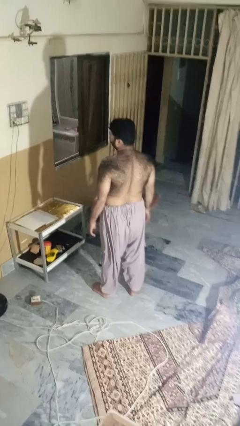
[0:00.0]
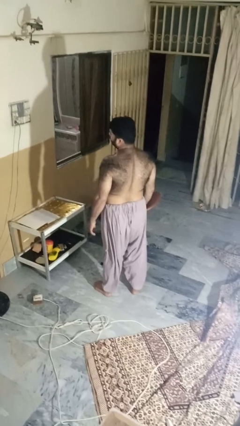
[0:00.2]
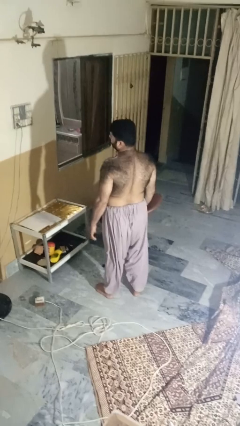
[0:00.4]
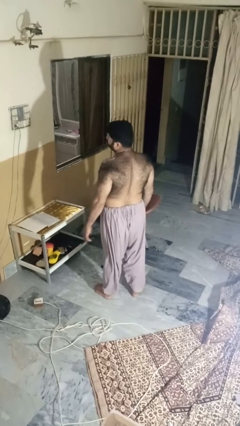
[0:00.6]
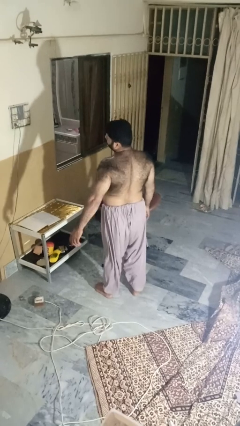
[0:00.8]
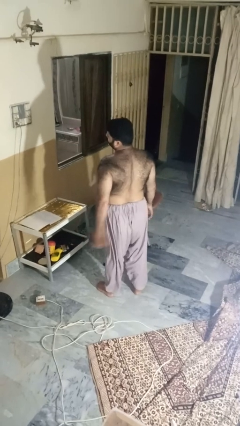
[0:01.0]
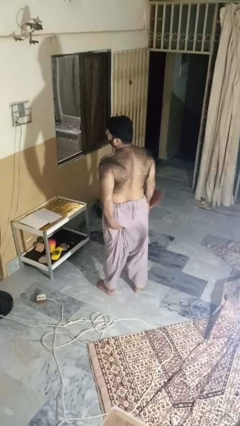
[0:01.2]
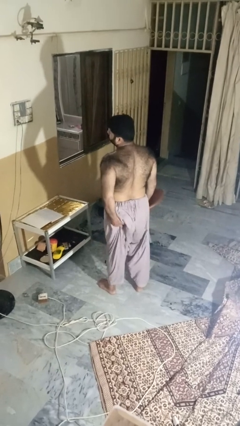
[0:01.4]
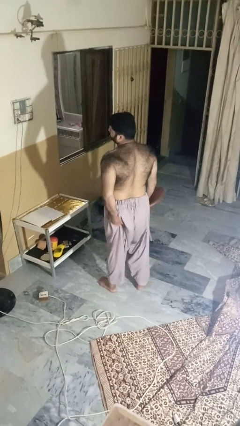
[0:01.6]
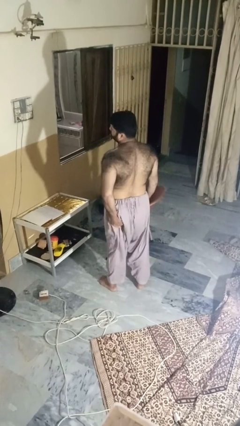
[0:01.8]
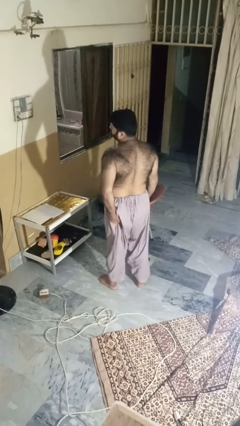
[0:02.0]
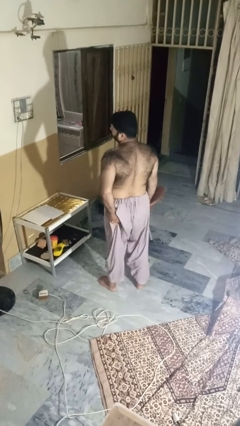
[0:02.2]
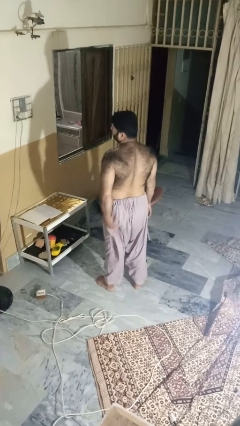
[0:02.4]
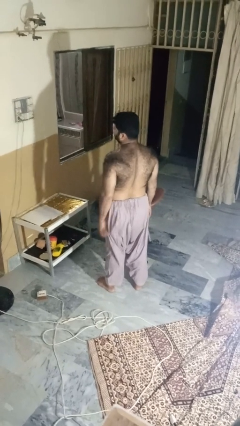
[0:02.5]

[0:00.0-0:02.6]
person wiggles hips

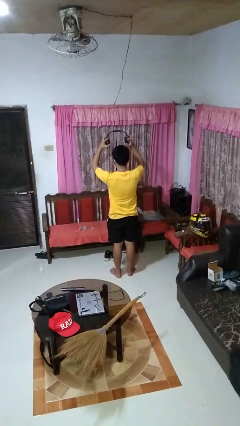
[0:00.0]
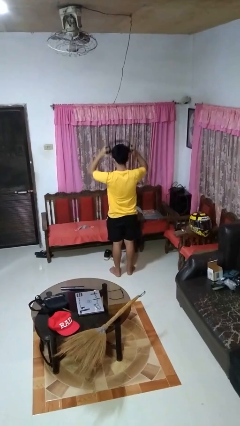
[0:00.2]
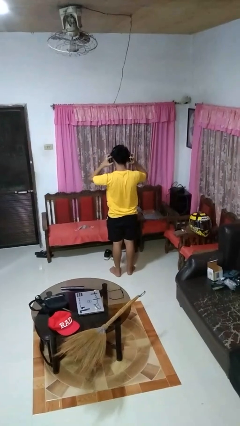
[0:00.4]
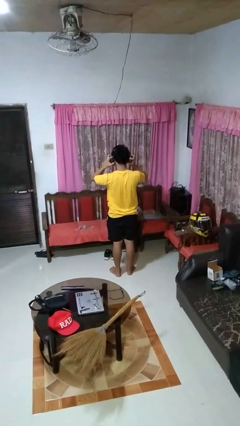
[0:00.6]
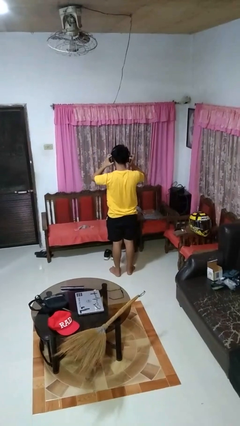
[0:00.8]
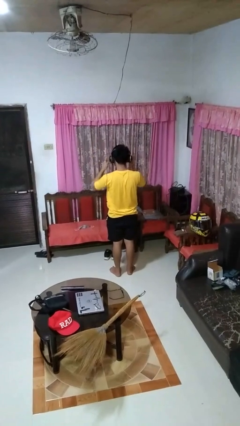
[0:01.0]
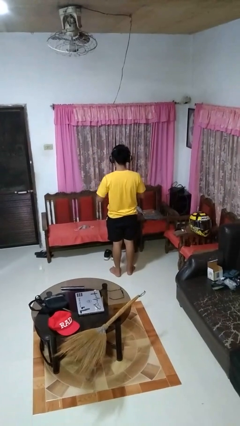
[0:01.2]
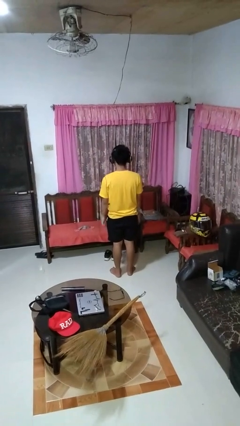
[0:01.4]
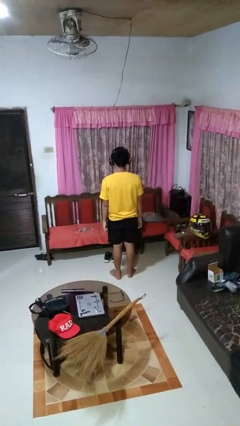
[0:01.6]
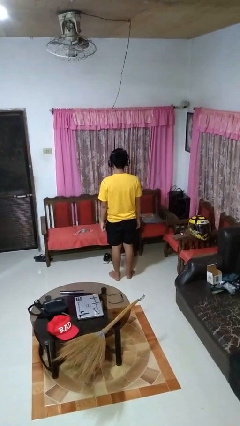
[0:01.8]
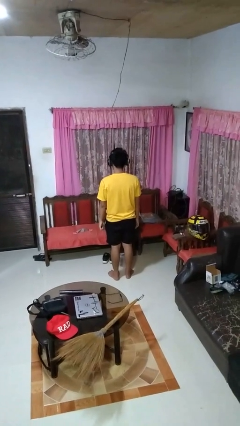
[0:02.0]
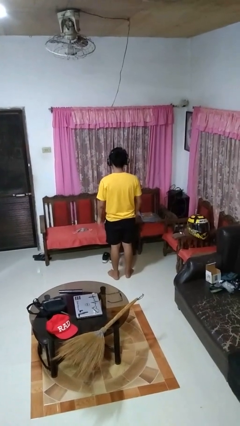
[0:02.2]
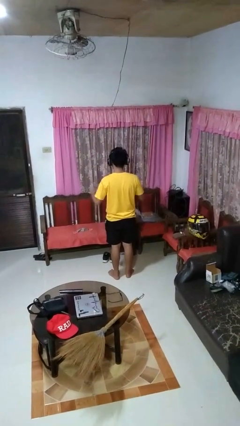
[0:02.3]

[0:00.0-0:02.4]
person puts on headphones

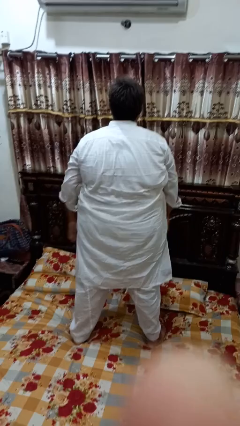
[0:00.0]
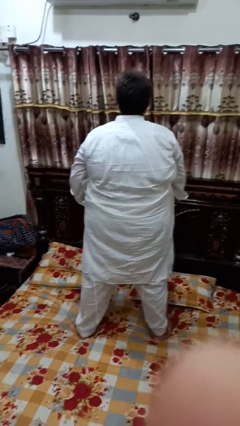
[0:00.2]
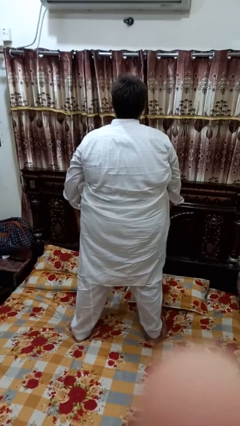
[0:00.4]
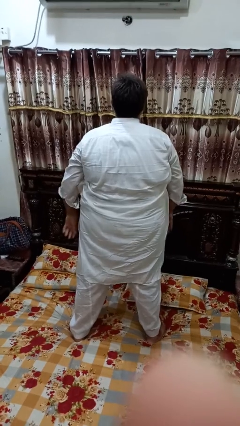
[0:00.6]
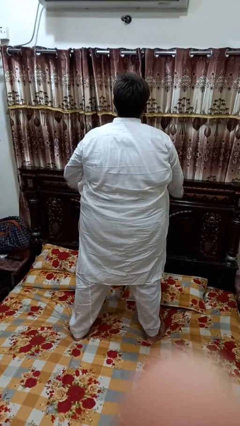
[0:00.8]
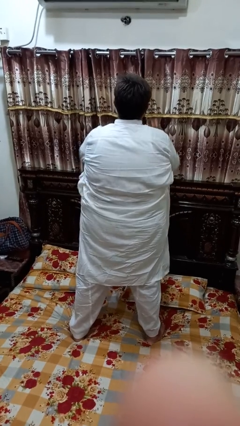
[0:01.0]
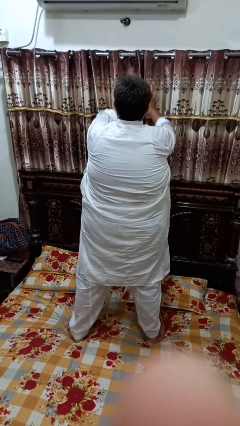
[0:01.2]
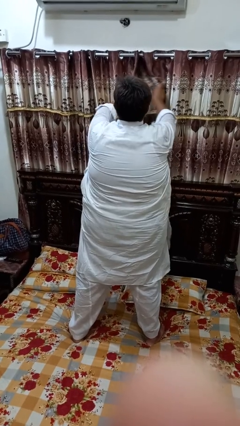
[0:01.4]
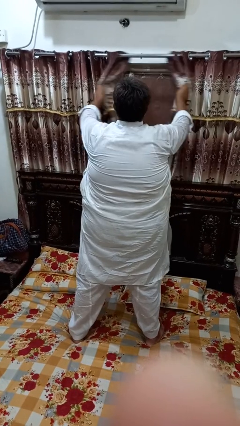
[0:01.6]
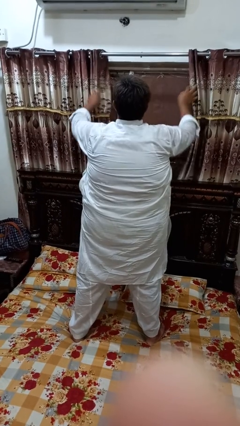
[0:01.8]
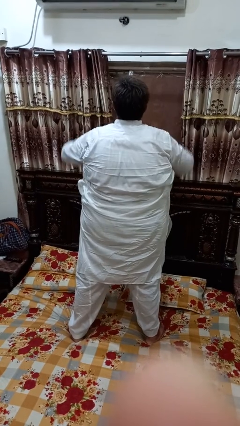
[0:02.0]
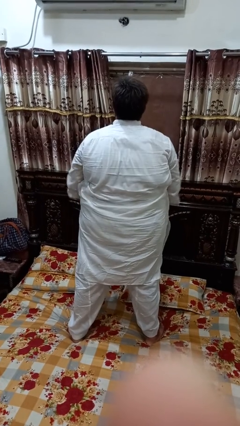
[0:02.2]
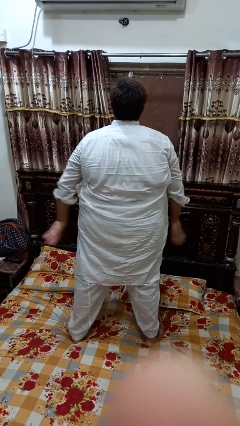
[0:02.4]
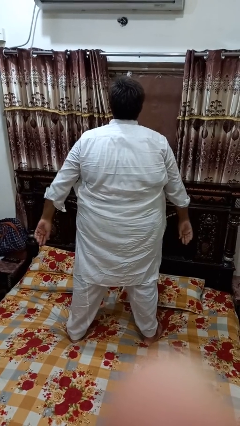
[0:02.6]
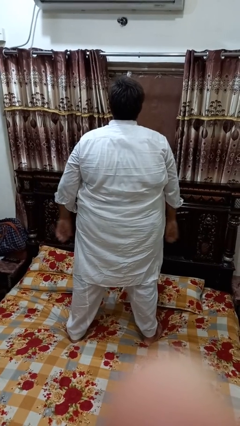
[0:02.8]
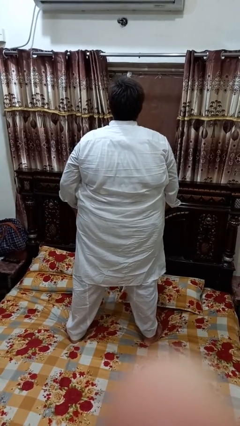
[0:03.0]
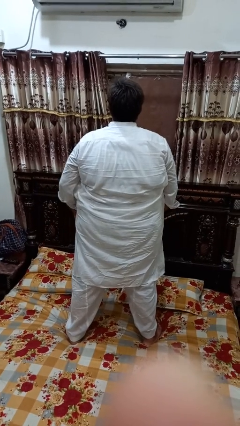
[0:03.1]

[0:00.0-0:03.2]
person opens curtains

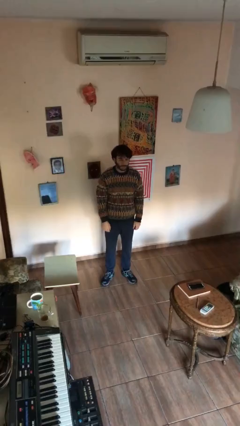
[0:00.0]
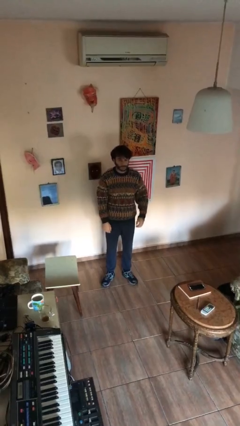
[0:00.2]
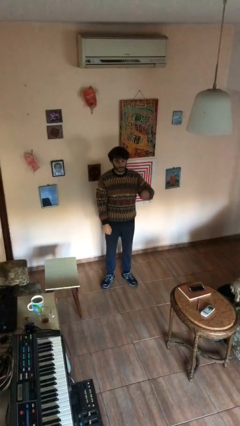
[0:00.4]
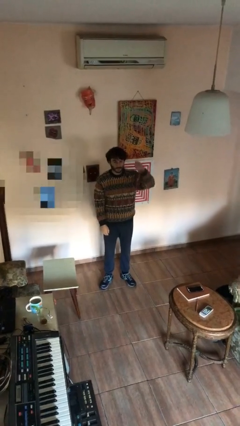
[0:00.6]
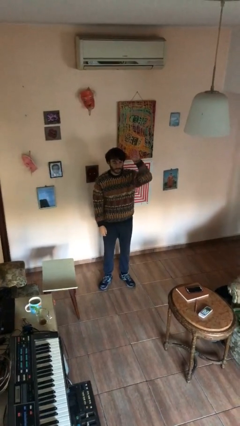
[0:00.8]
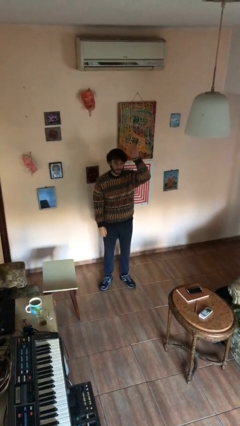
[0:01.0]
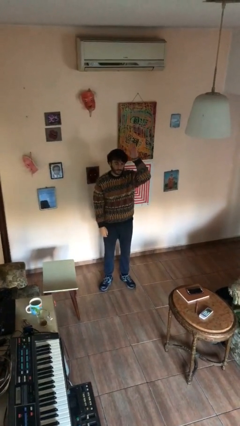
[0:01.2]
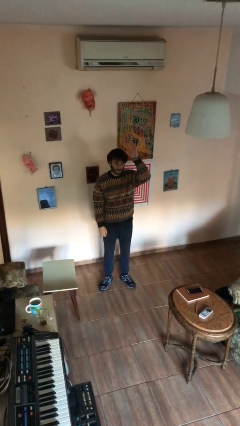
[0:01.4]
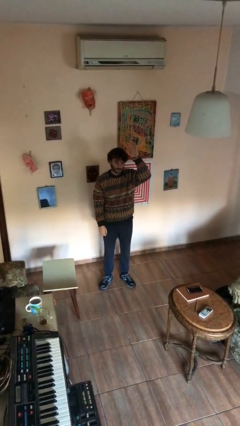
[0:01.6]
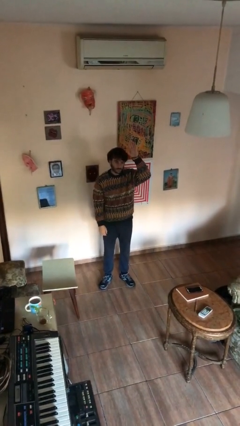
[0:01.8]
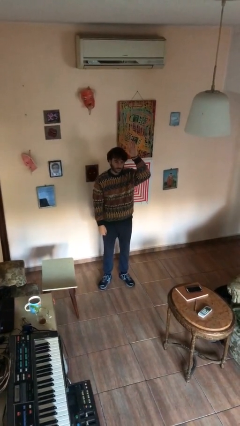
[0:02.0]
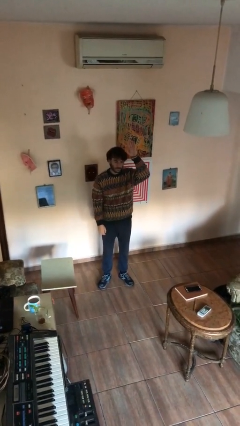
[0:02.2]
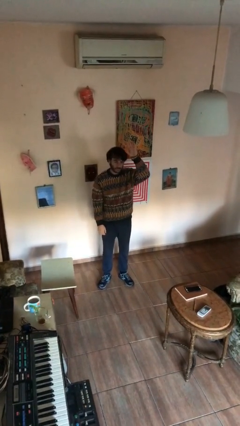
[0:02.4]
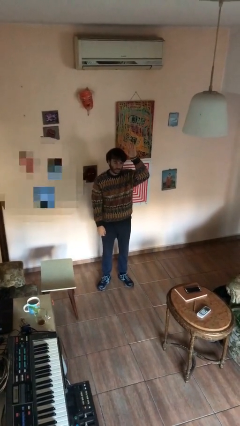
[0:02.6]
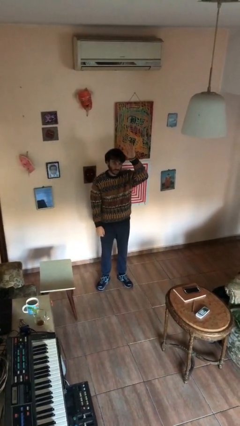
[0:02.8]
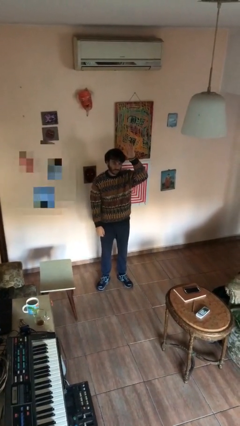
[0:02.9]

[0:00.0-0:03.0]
person gestures raise hand

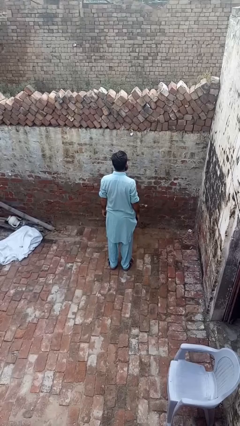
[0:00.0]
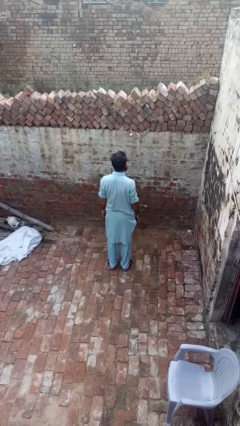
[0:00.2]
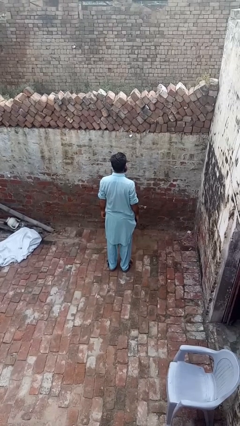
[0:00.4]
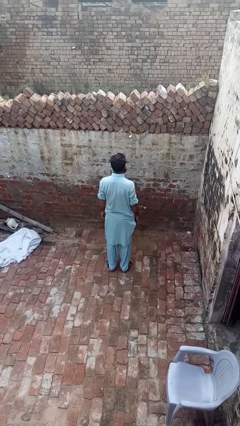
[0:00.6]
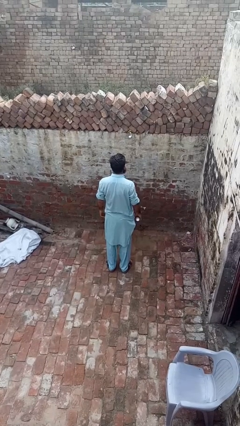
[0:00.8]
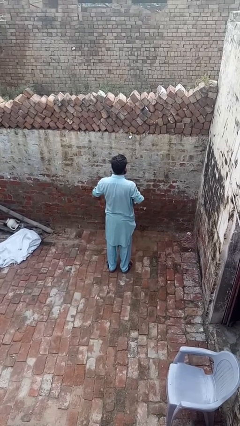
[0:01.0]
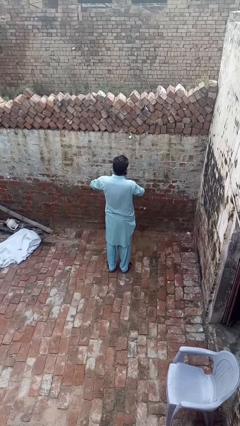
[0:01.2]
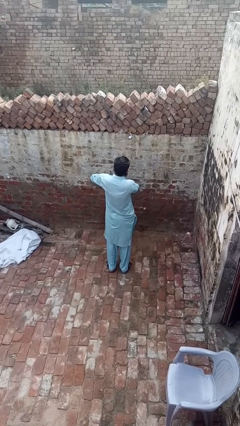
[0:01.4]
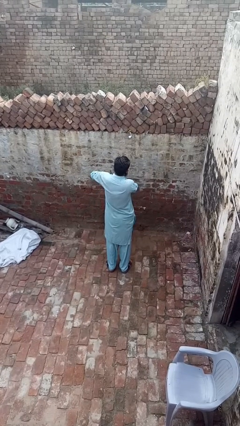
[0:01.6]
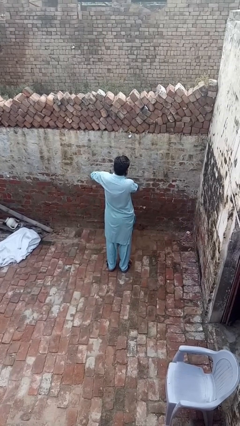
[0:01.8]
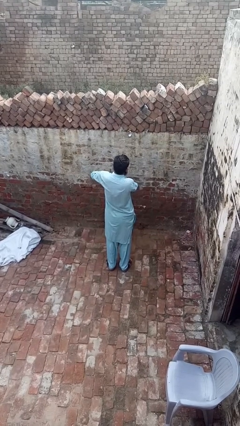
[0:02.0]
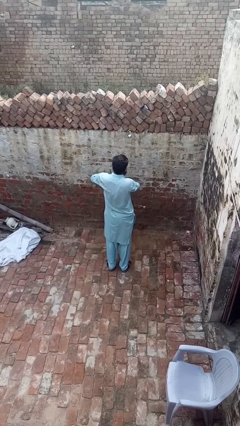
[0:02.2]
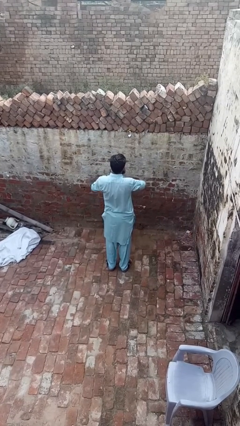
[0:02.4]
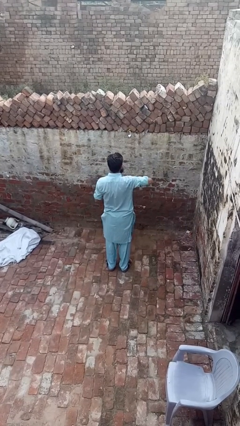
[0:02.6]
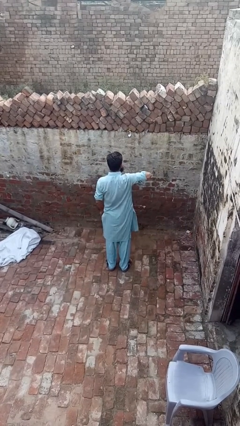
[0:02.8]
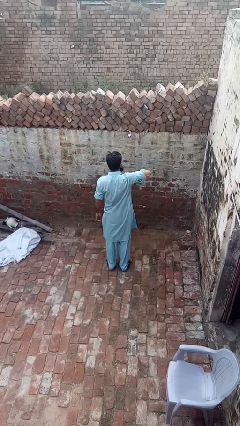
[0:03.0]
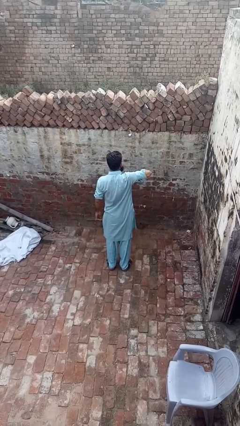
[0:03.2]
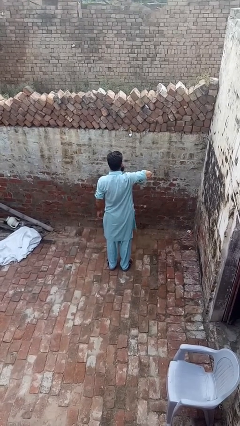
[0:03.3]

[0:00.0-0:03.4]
person applies deodorant

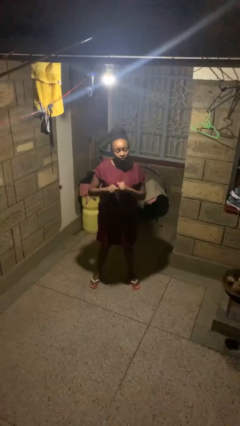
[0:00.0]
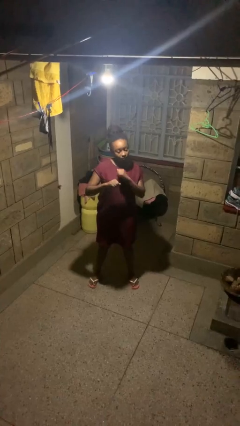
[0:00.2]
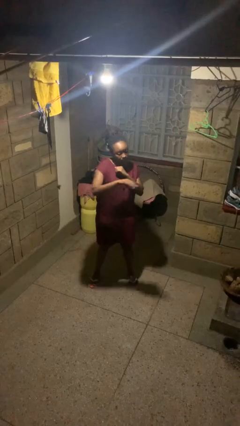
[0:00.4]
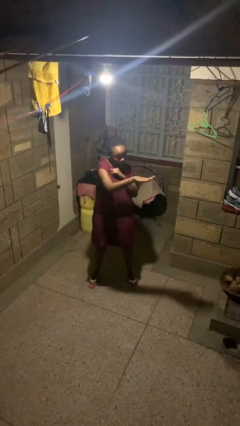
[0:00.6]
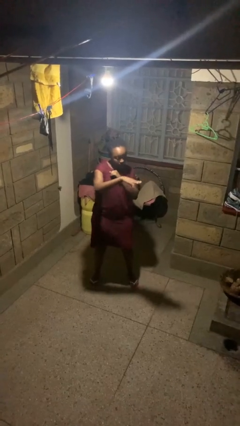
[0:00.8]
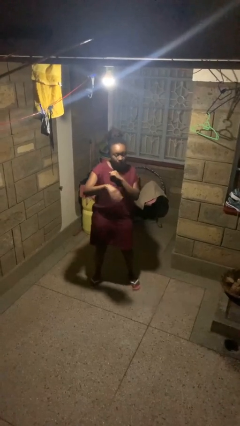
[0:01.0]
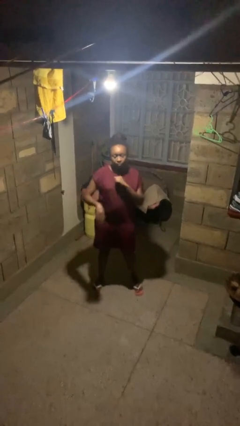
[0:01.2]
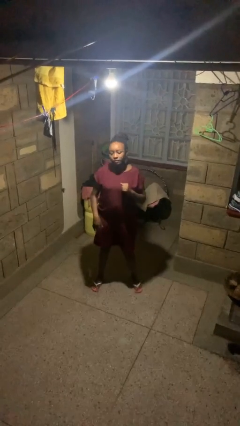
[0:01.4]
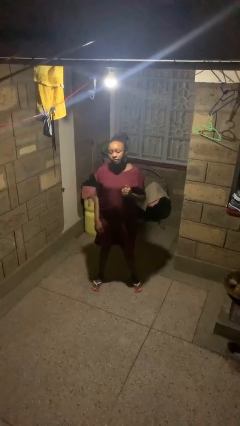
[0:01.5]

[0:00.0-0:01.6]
person karate chop

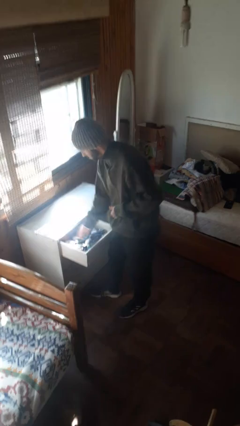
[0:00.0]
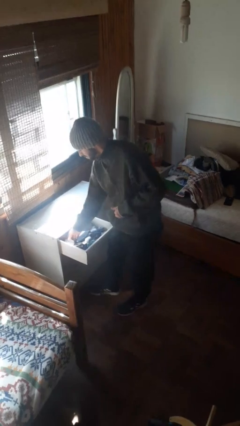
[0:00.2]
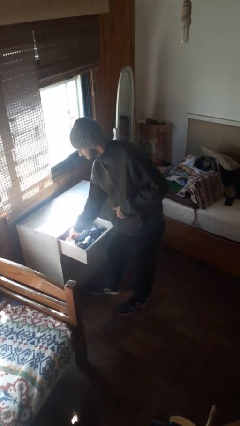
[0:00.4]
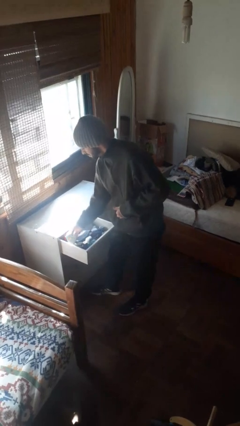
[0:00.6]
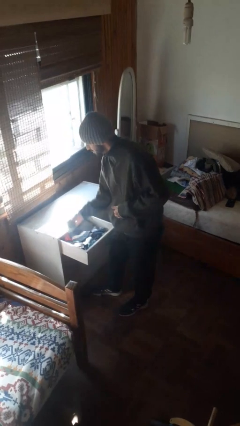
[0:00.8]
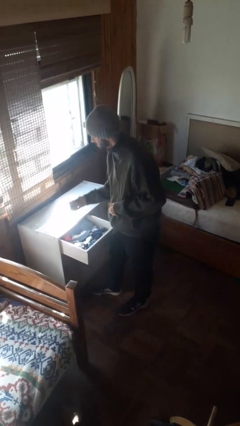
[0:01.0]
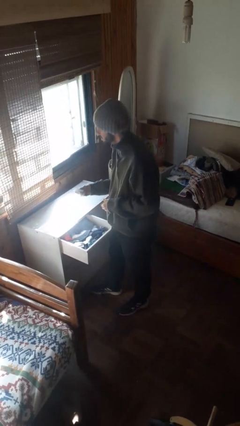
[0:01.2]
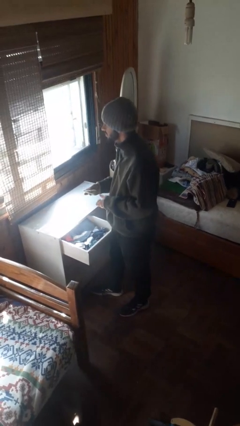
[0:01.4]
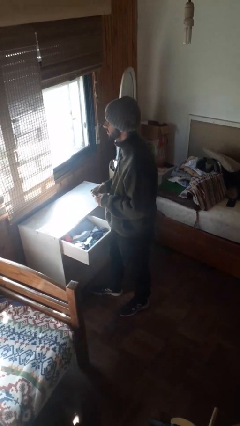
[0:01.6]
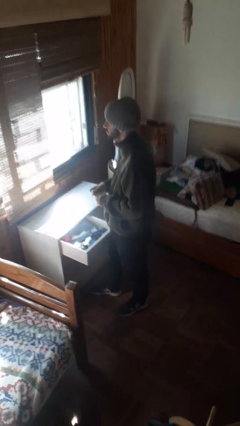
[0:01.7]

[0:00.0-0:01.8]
person takes clothes from dresser
